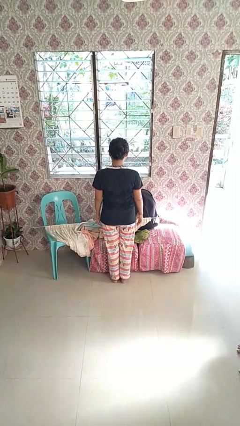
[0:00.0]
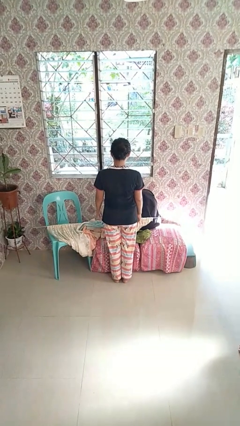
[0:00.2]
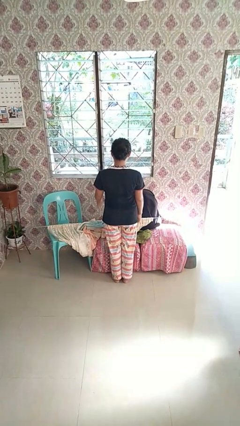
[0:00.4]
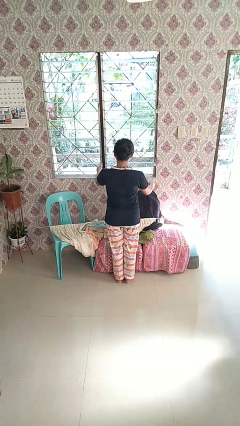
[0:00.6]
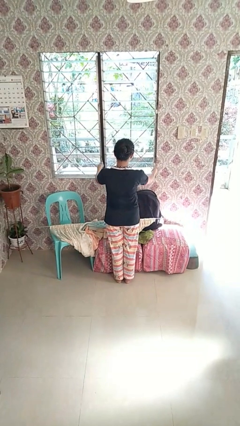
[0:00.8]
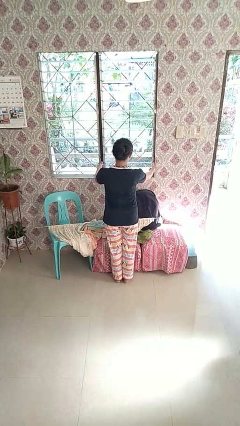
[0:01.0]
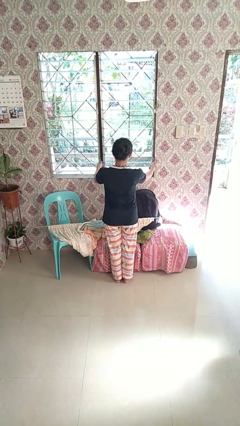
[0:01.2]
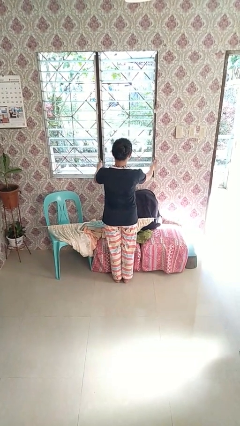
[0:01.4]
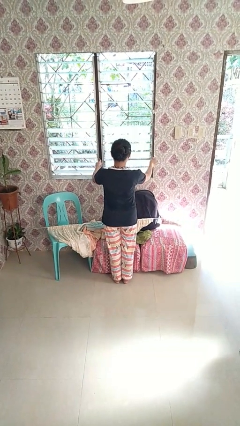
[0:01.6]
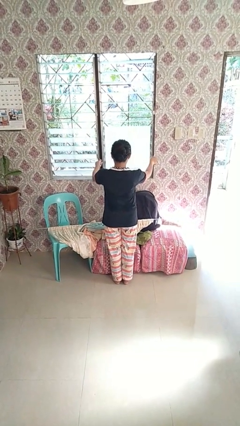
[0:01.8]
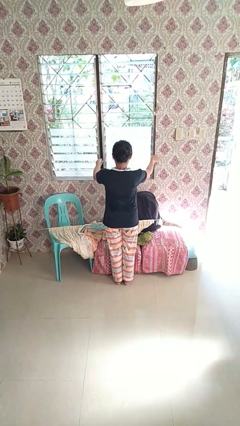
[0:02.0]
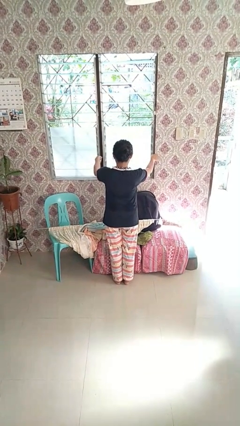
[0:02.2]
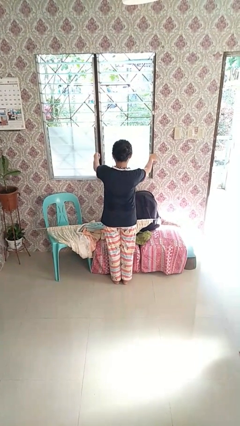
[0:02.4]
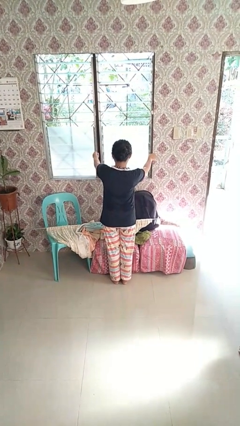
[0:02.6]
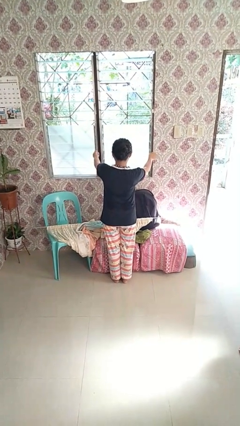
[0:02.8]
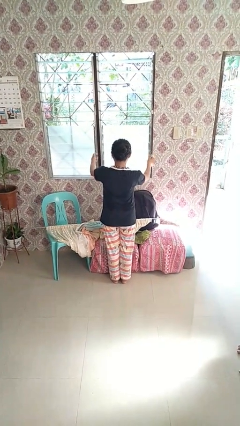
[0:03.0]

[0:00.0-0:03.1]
person closes home window

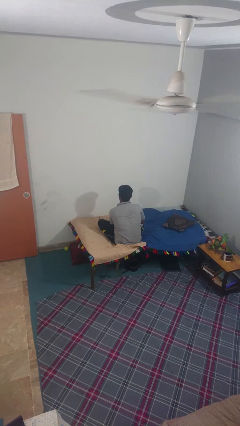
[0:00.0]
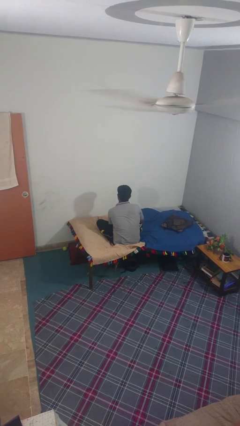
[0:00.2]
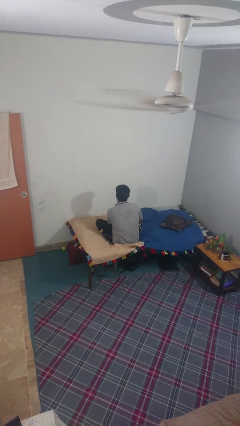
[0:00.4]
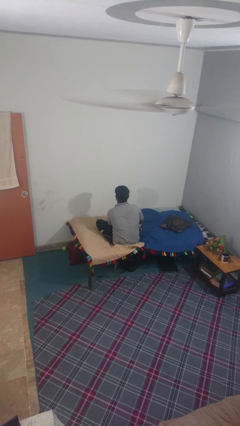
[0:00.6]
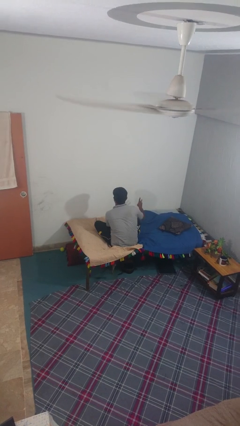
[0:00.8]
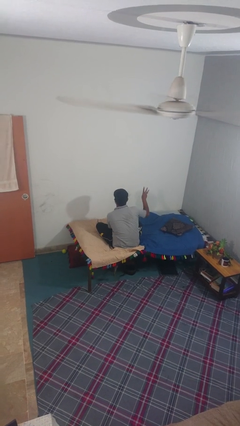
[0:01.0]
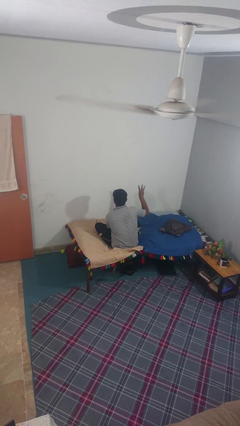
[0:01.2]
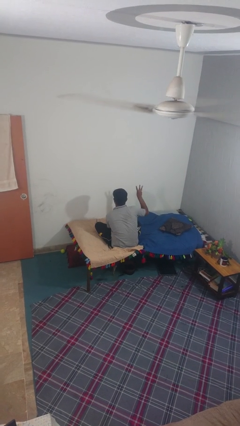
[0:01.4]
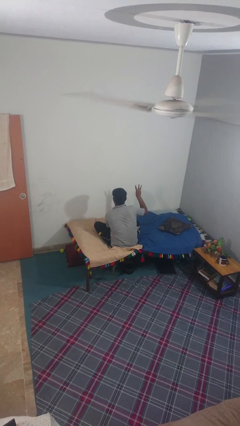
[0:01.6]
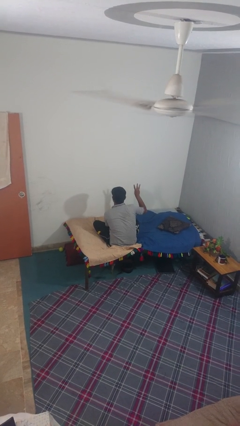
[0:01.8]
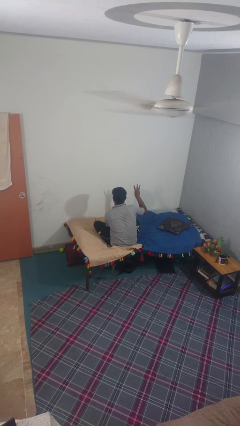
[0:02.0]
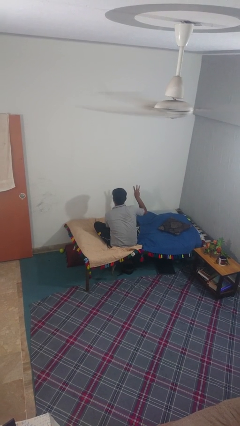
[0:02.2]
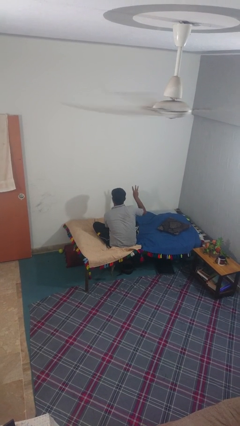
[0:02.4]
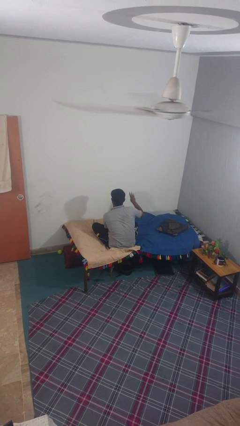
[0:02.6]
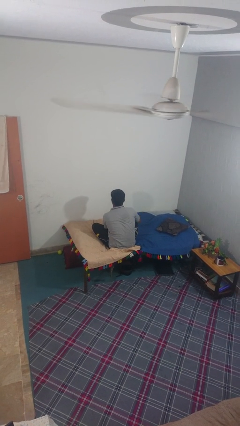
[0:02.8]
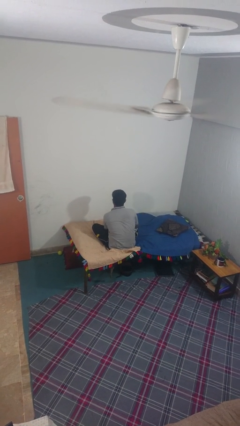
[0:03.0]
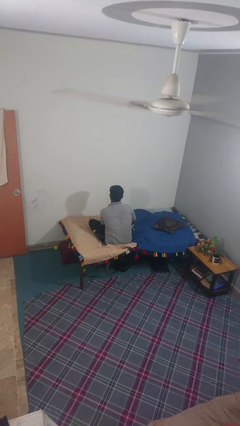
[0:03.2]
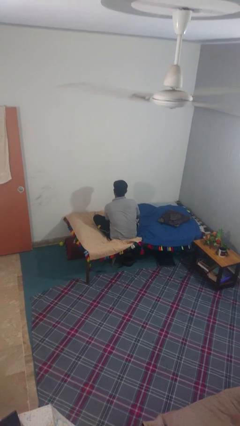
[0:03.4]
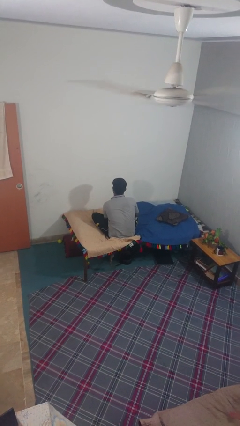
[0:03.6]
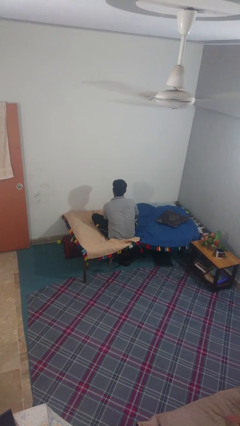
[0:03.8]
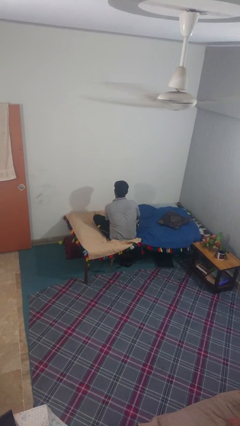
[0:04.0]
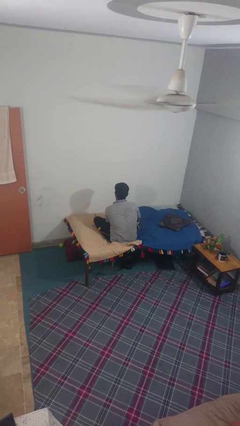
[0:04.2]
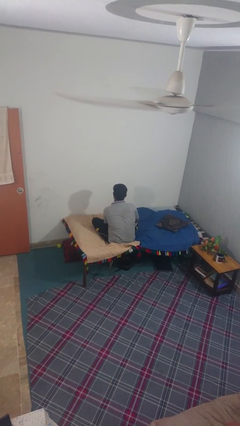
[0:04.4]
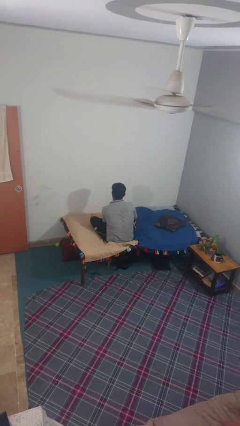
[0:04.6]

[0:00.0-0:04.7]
person gestures number three

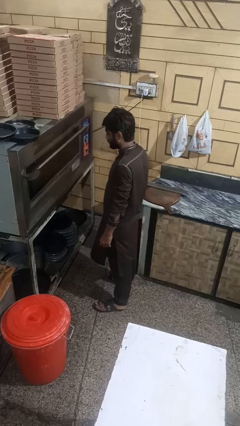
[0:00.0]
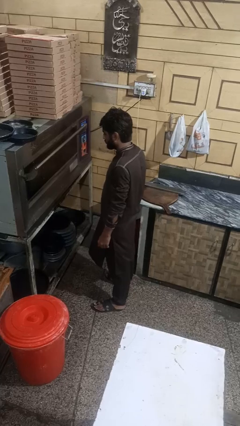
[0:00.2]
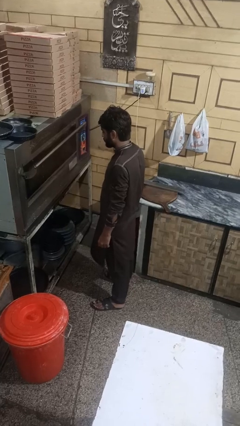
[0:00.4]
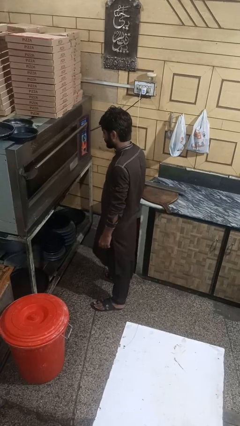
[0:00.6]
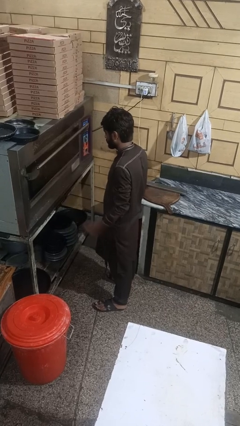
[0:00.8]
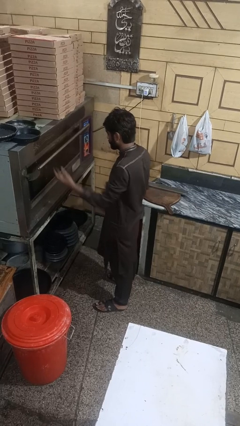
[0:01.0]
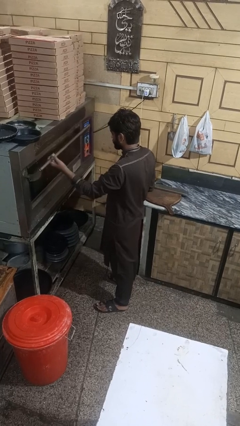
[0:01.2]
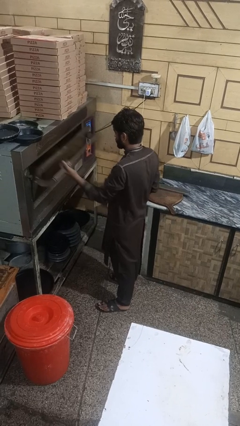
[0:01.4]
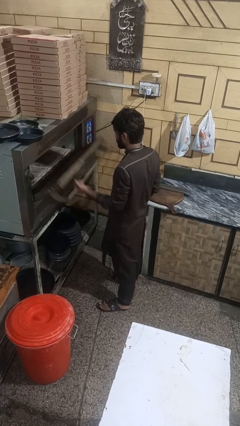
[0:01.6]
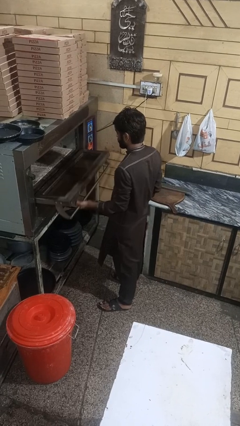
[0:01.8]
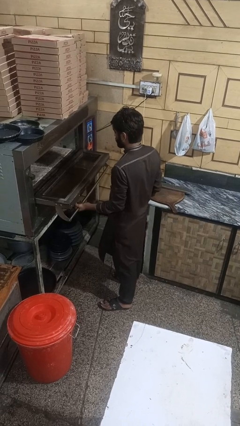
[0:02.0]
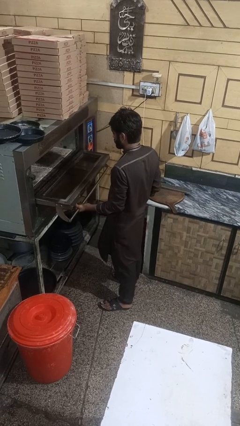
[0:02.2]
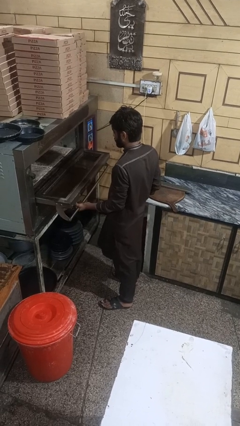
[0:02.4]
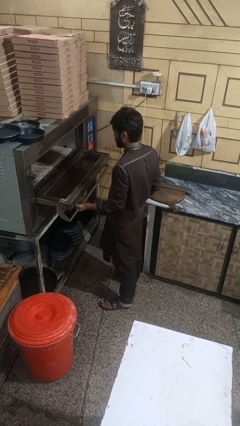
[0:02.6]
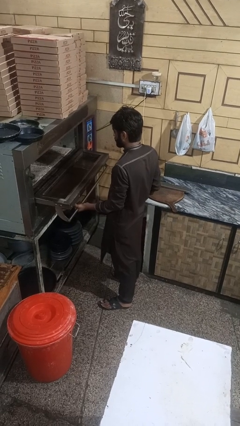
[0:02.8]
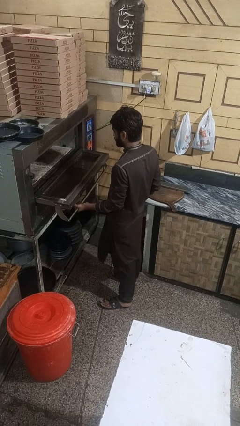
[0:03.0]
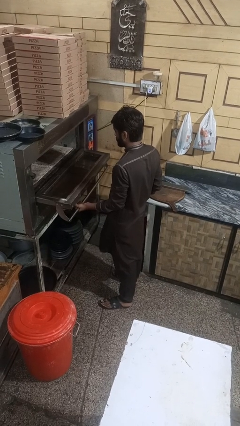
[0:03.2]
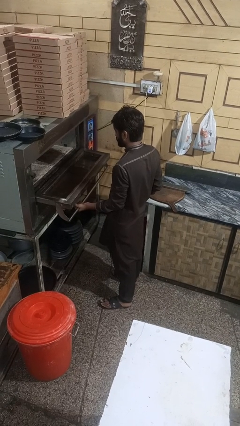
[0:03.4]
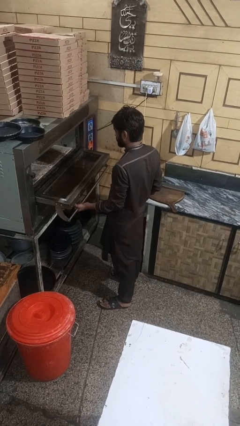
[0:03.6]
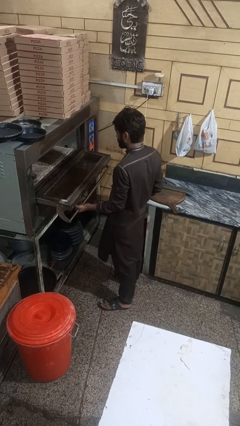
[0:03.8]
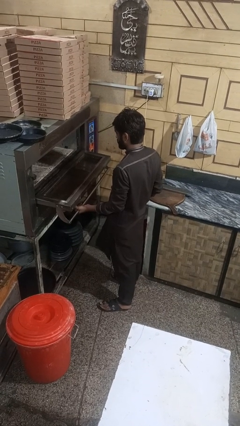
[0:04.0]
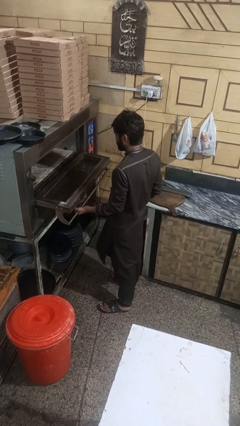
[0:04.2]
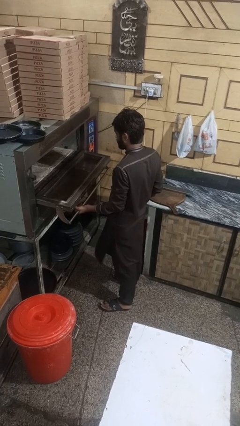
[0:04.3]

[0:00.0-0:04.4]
person opens microwave

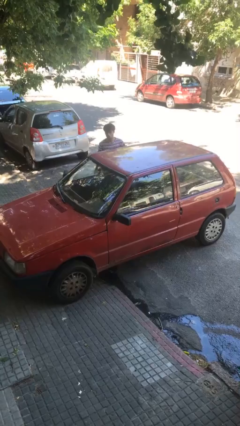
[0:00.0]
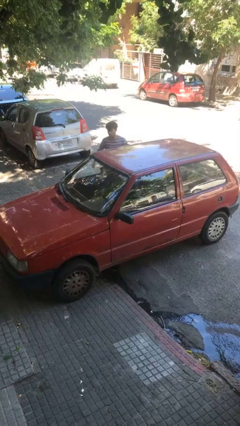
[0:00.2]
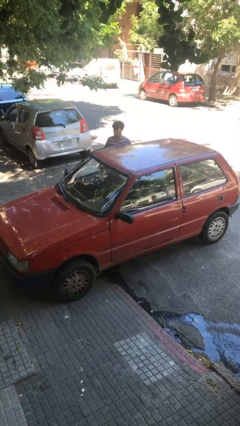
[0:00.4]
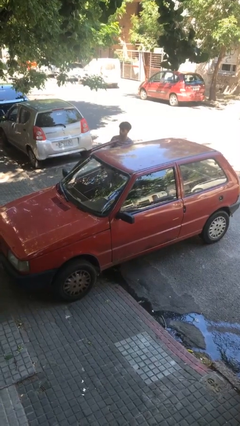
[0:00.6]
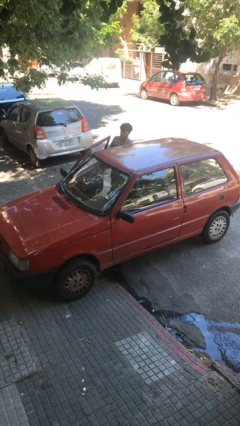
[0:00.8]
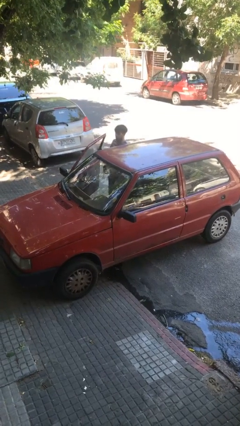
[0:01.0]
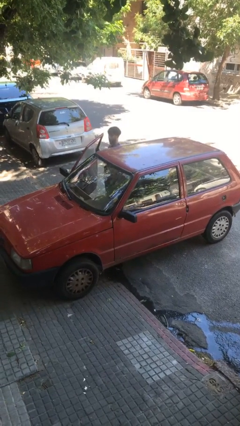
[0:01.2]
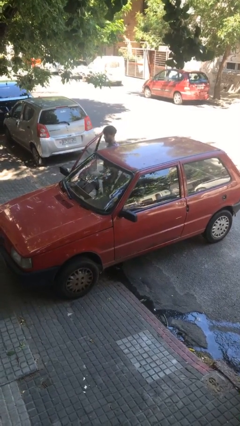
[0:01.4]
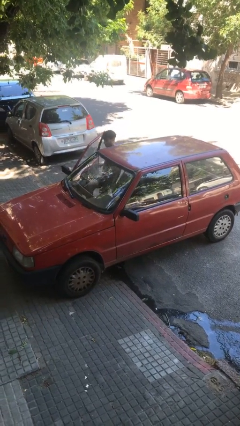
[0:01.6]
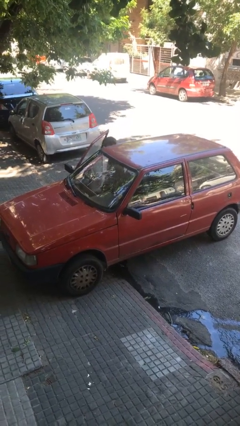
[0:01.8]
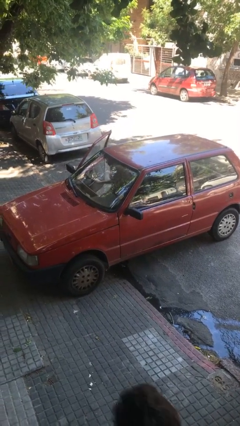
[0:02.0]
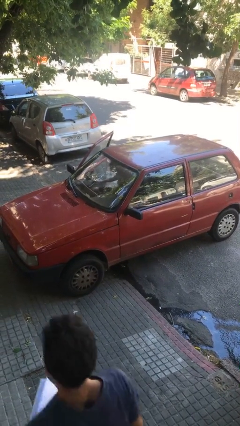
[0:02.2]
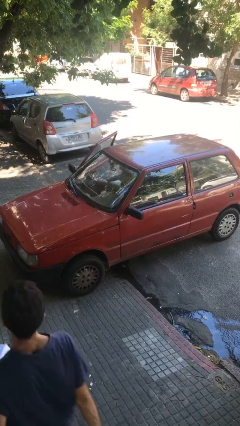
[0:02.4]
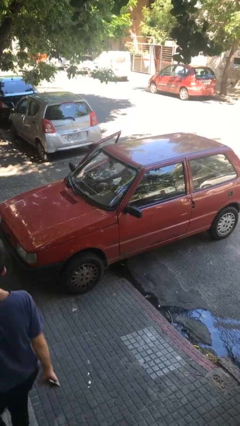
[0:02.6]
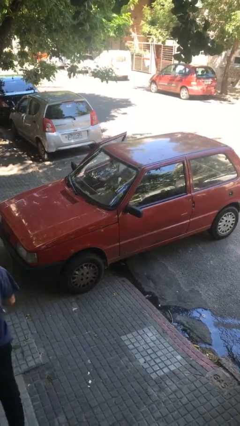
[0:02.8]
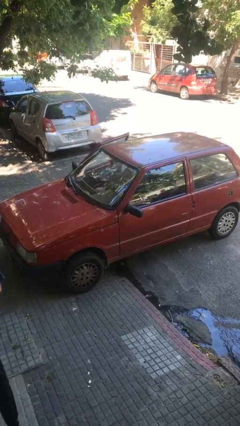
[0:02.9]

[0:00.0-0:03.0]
car picks up person

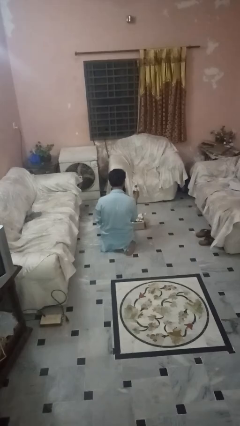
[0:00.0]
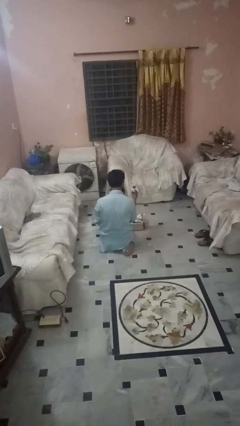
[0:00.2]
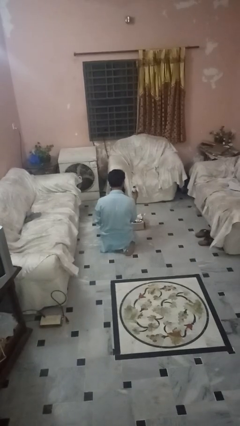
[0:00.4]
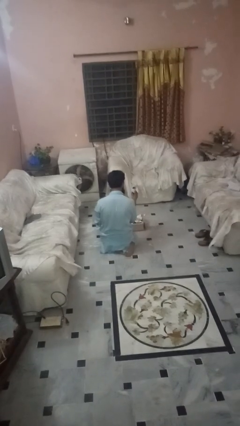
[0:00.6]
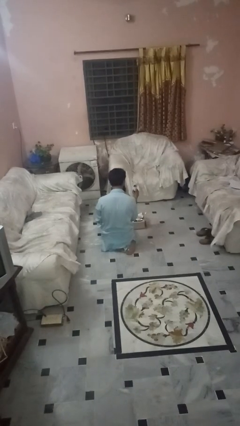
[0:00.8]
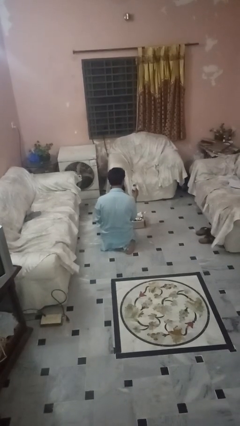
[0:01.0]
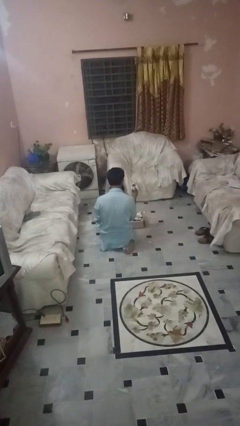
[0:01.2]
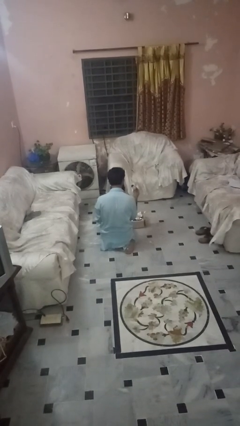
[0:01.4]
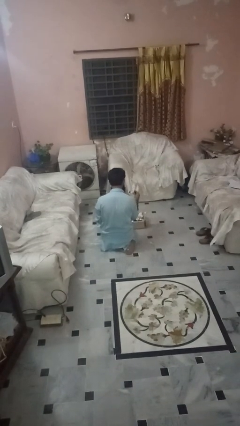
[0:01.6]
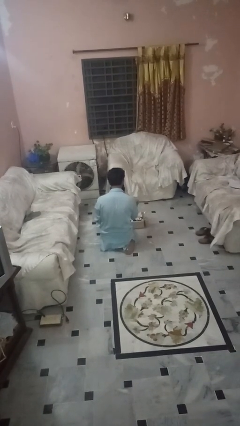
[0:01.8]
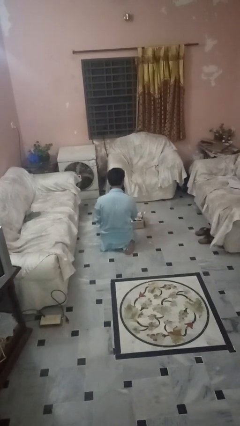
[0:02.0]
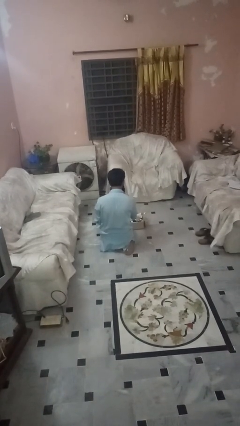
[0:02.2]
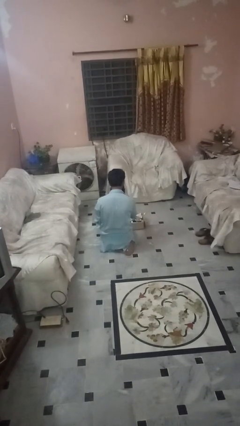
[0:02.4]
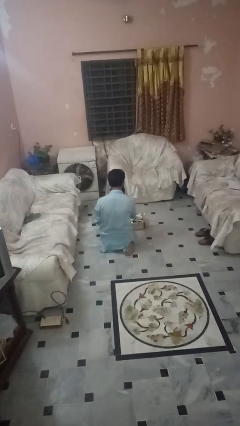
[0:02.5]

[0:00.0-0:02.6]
person puts object into box
